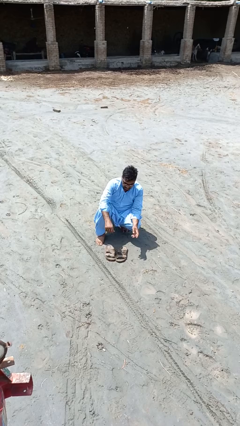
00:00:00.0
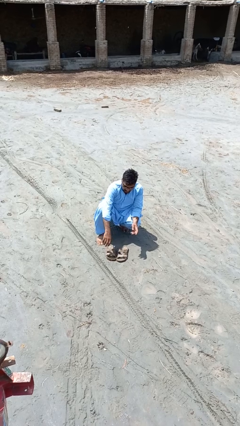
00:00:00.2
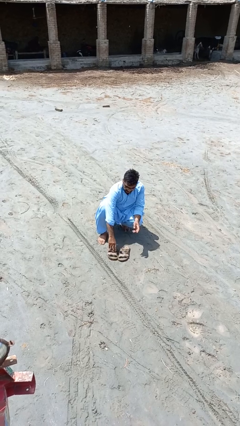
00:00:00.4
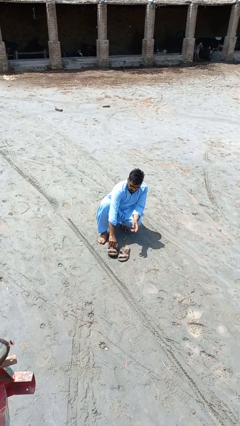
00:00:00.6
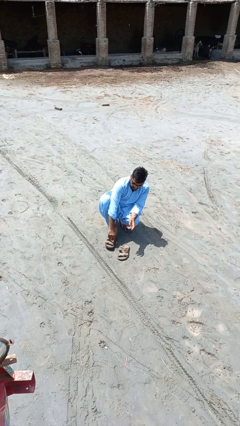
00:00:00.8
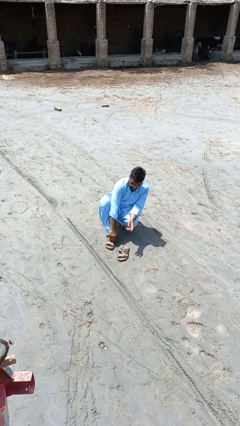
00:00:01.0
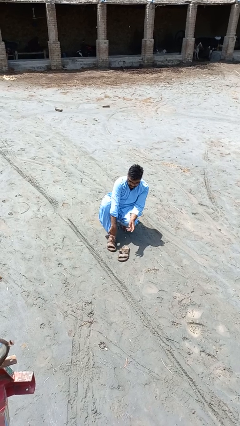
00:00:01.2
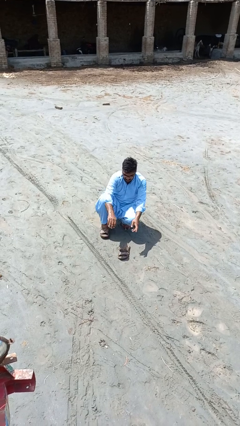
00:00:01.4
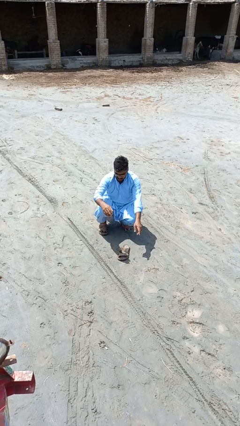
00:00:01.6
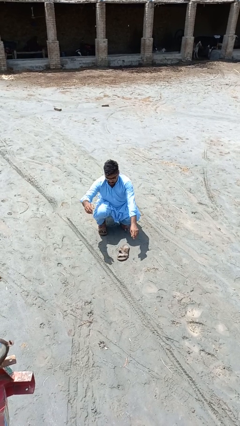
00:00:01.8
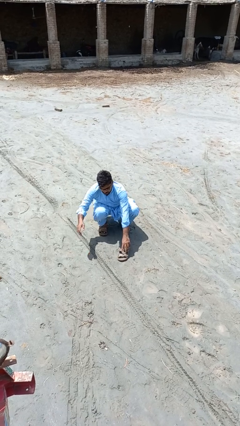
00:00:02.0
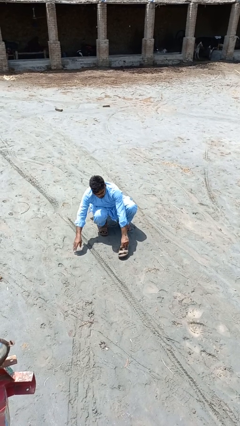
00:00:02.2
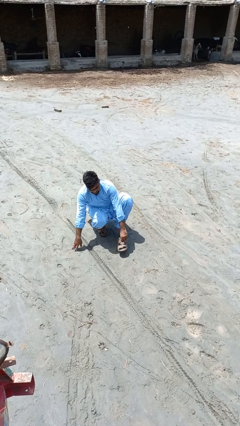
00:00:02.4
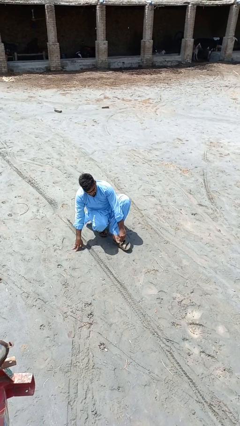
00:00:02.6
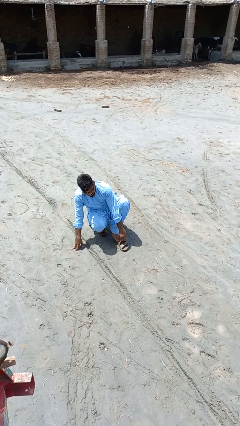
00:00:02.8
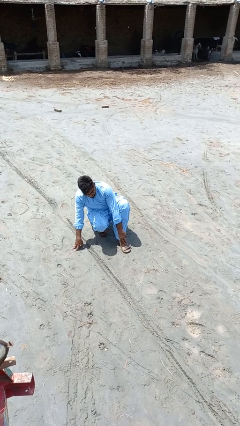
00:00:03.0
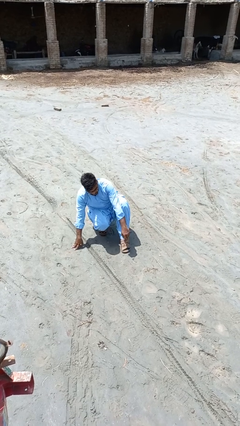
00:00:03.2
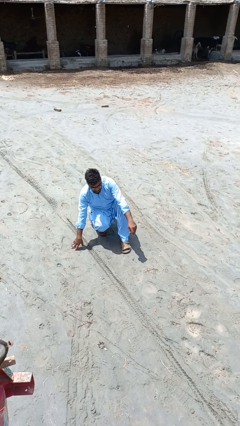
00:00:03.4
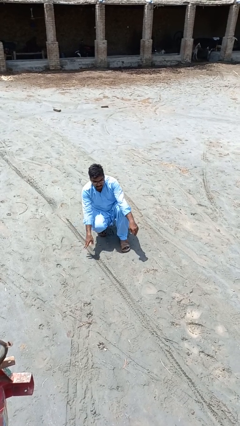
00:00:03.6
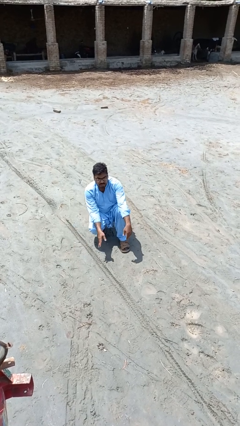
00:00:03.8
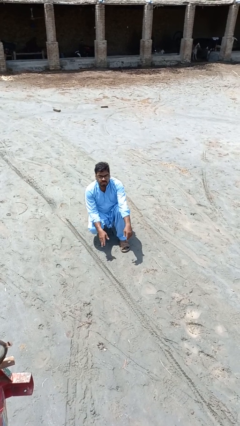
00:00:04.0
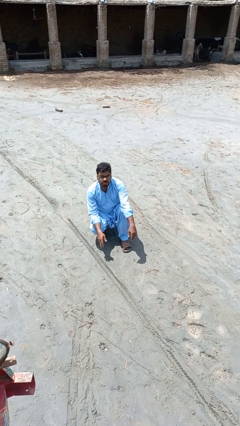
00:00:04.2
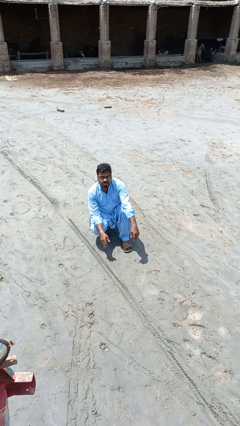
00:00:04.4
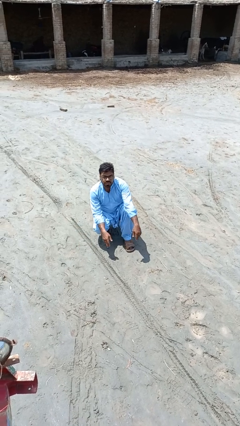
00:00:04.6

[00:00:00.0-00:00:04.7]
person puts on shoes

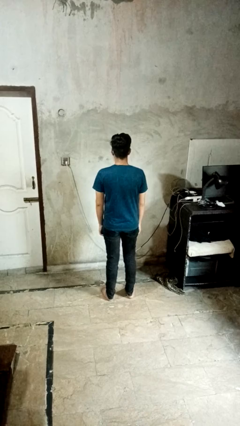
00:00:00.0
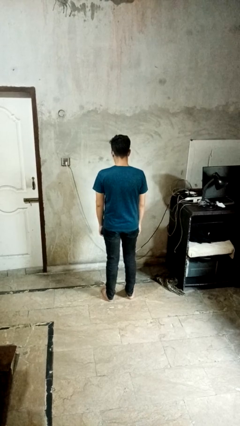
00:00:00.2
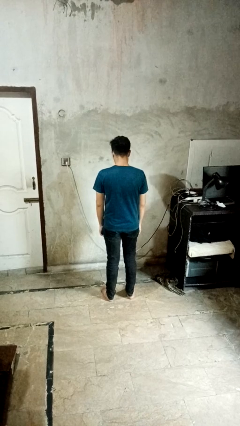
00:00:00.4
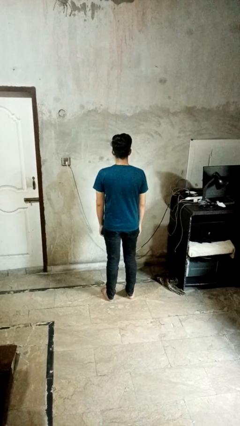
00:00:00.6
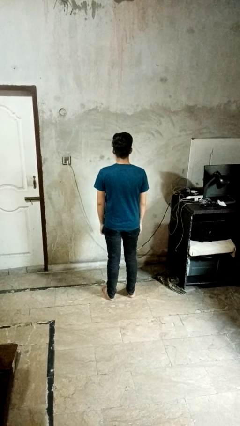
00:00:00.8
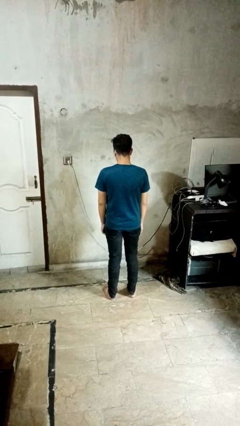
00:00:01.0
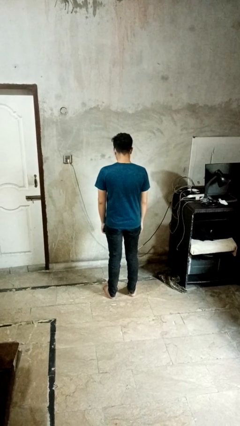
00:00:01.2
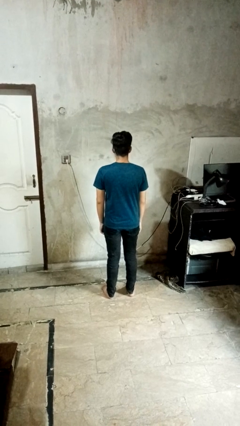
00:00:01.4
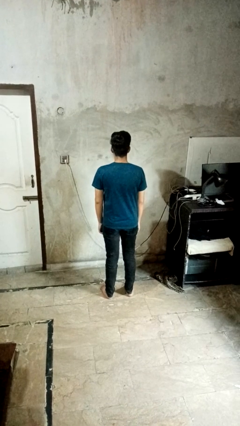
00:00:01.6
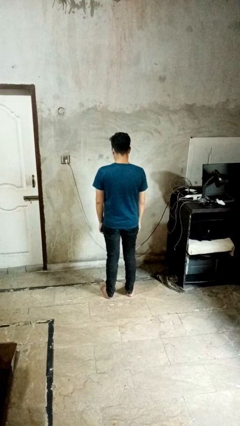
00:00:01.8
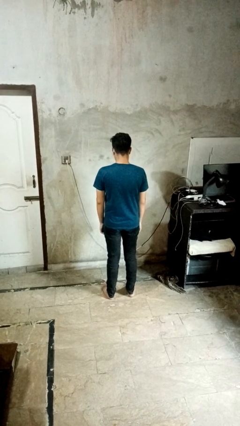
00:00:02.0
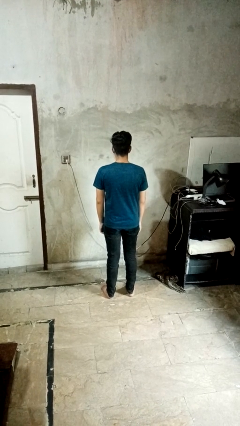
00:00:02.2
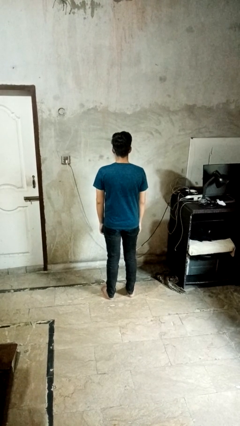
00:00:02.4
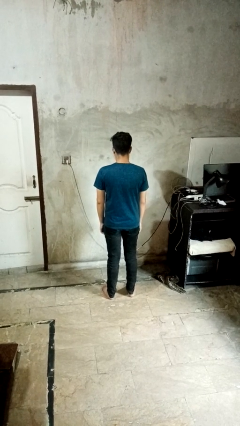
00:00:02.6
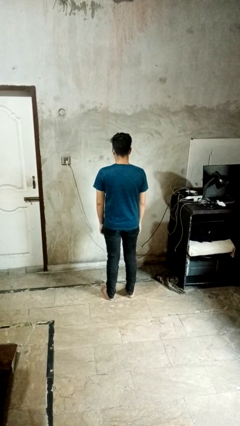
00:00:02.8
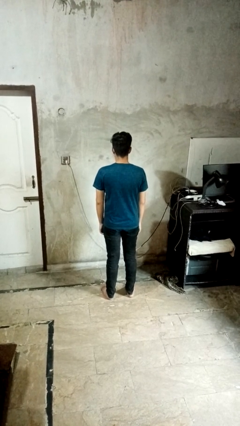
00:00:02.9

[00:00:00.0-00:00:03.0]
person nods head

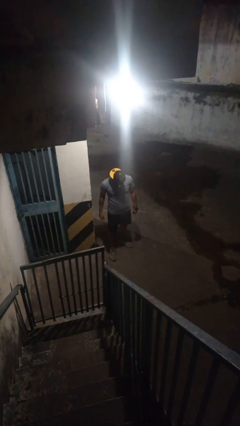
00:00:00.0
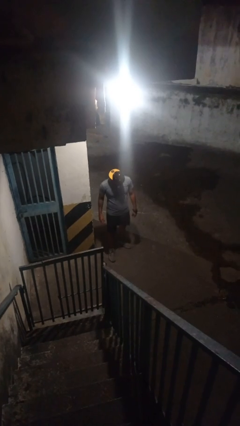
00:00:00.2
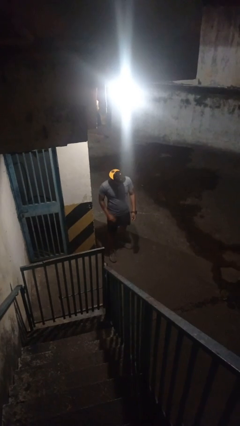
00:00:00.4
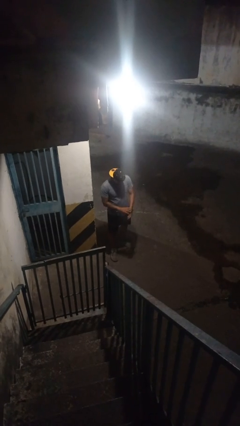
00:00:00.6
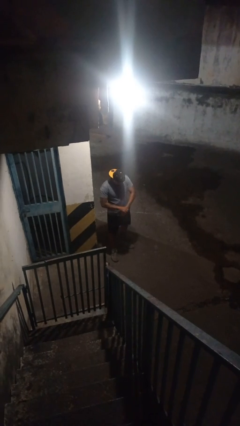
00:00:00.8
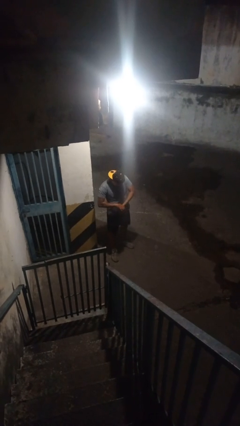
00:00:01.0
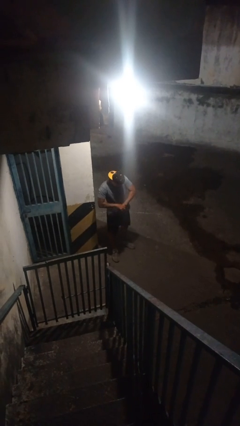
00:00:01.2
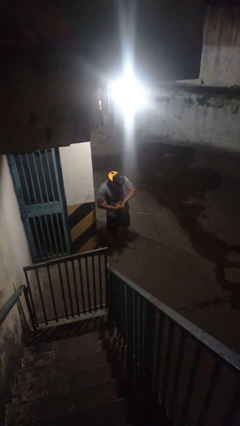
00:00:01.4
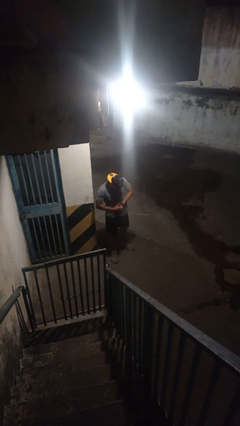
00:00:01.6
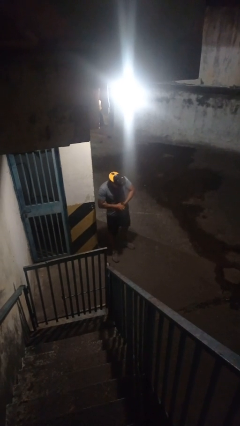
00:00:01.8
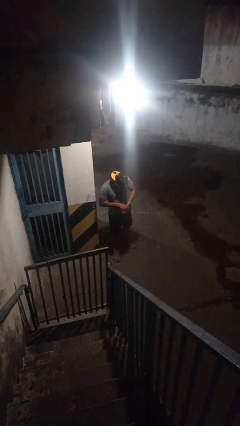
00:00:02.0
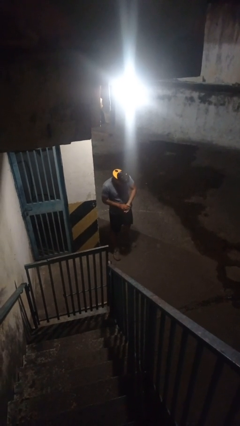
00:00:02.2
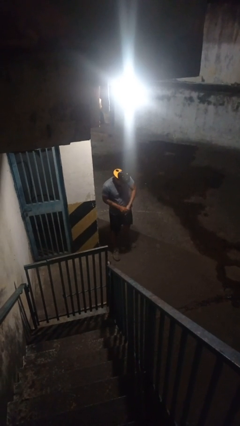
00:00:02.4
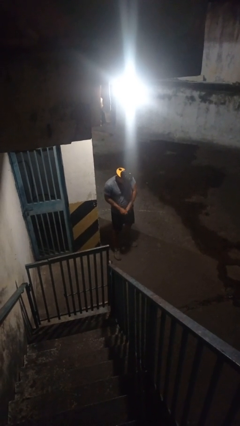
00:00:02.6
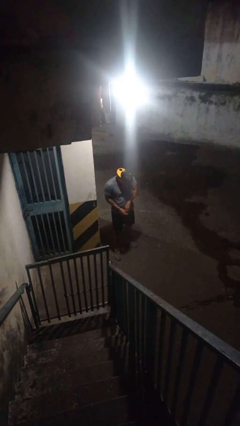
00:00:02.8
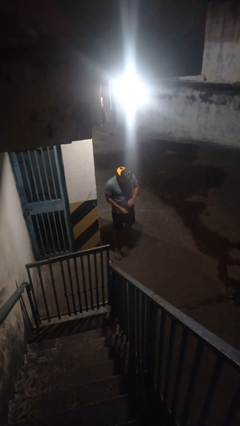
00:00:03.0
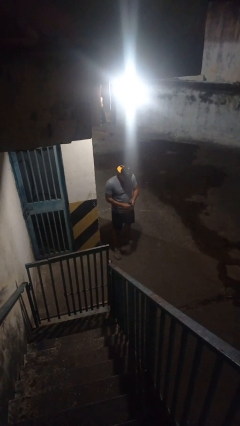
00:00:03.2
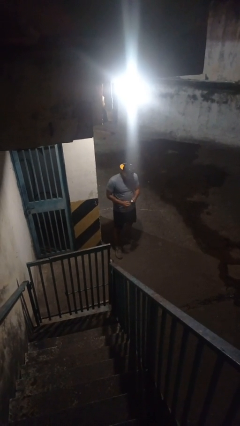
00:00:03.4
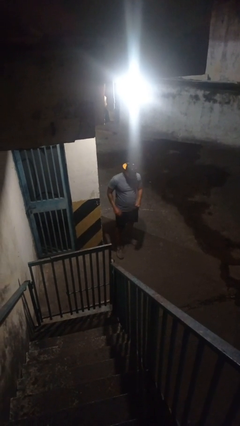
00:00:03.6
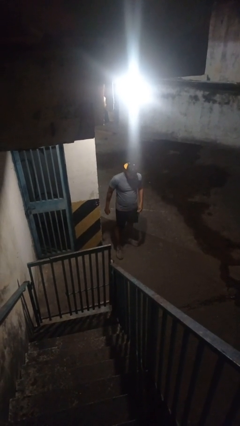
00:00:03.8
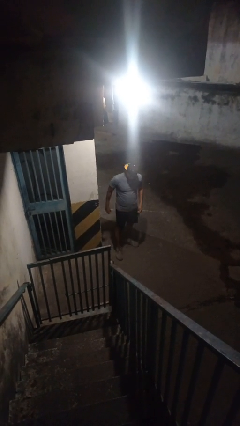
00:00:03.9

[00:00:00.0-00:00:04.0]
person takes off wristwatch

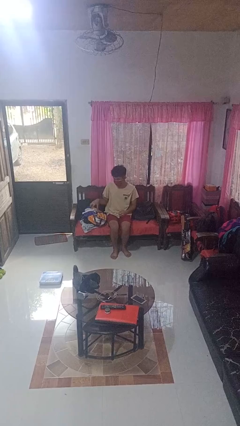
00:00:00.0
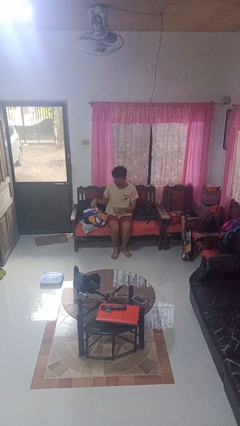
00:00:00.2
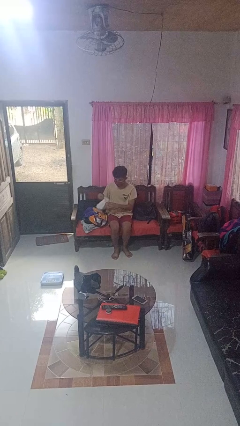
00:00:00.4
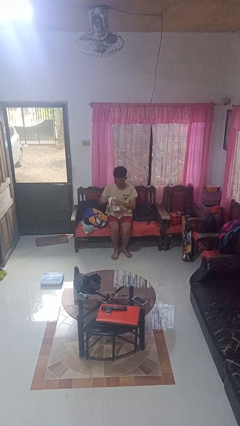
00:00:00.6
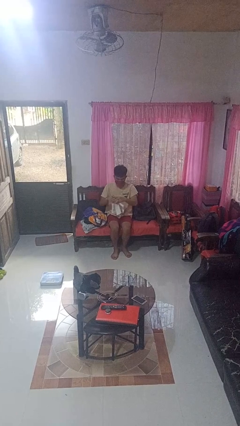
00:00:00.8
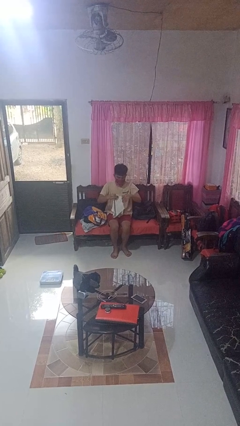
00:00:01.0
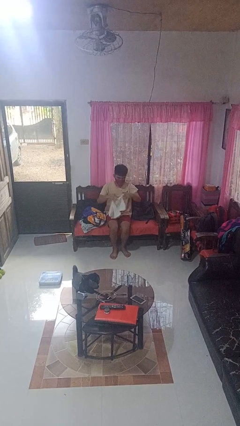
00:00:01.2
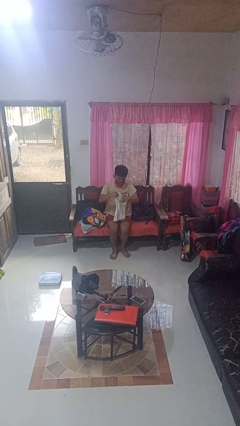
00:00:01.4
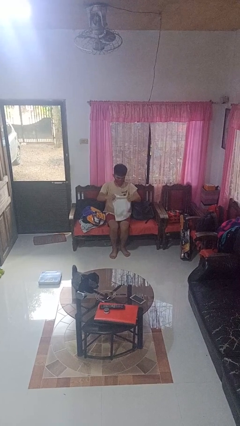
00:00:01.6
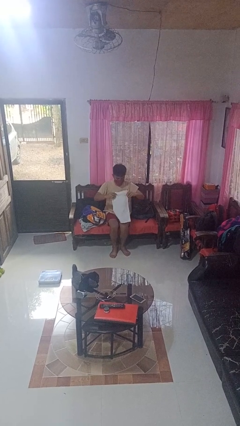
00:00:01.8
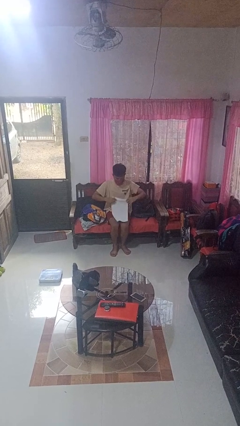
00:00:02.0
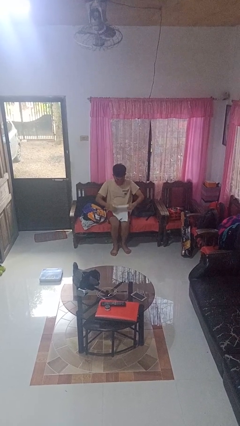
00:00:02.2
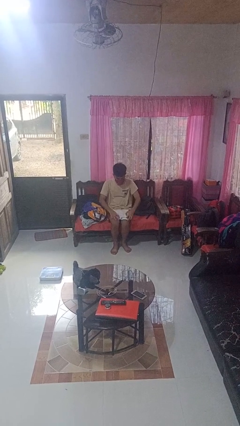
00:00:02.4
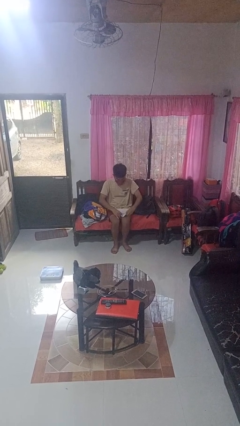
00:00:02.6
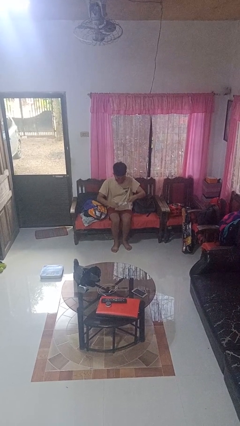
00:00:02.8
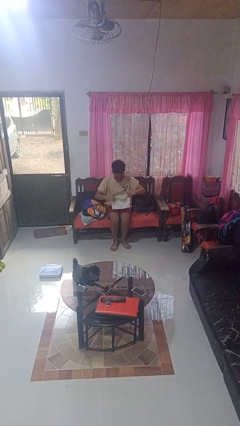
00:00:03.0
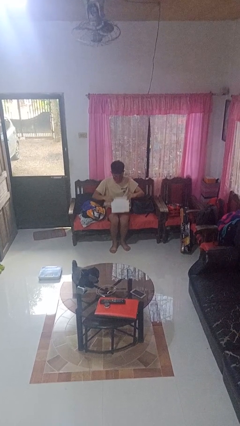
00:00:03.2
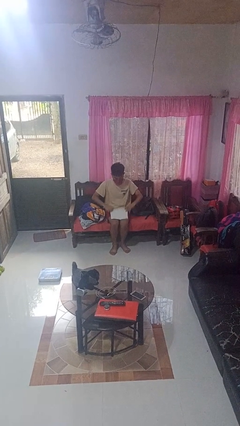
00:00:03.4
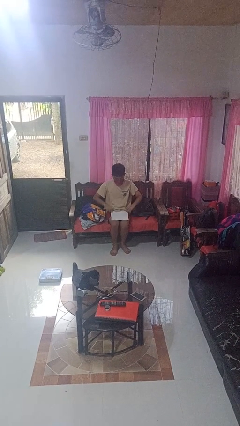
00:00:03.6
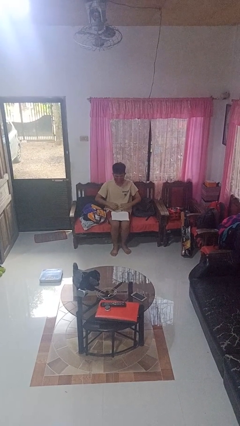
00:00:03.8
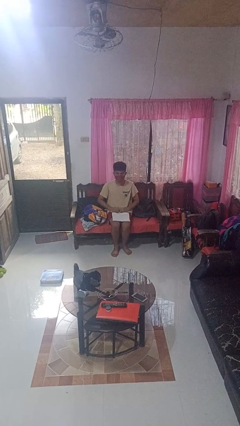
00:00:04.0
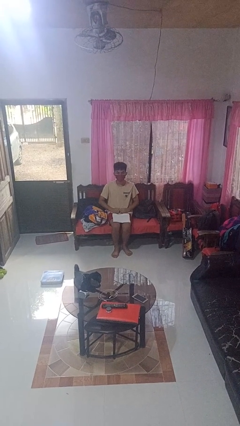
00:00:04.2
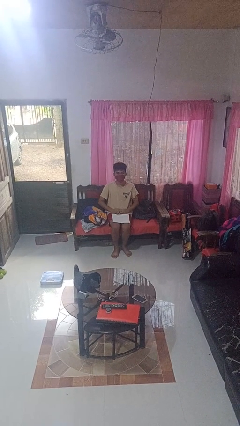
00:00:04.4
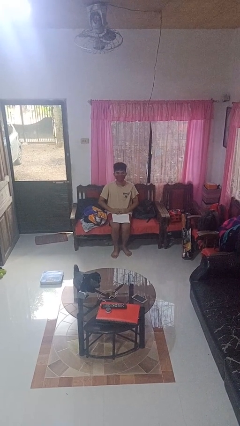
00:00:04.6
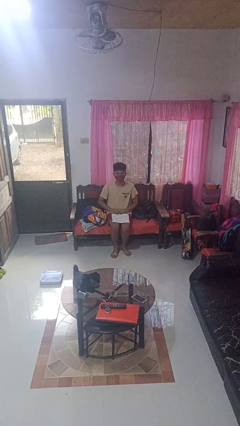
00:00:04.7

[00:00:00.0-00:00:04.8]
person folds towel

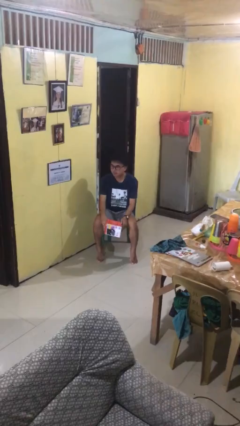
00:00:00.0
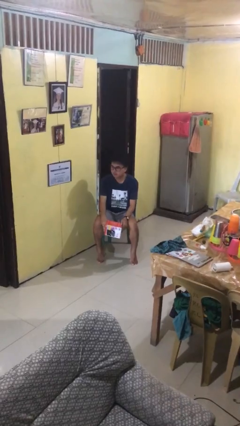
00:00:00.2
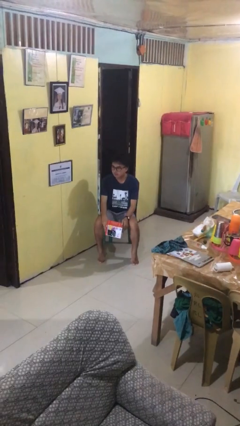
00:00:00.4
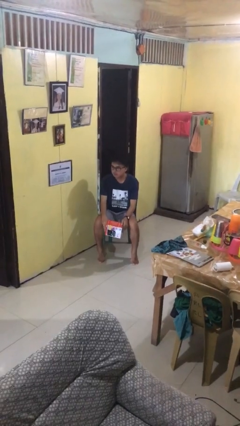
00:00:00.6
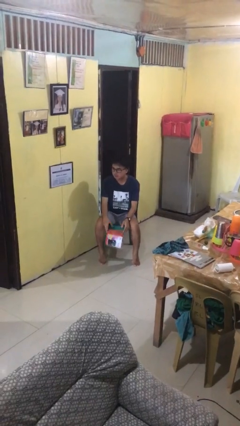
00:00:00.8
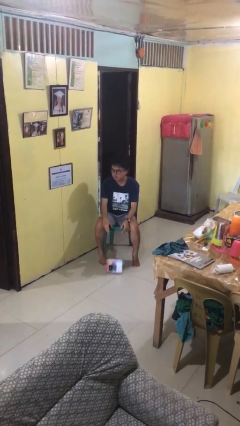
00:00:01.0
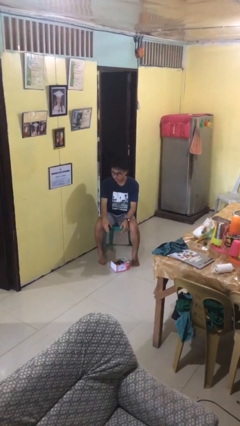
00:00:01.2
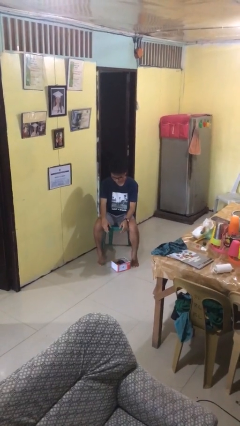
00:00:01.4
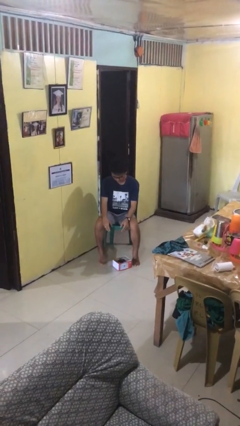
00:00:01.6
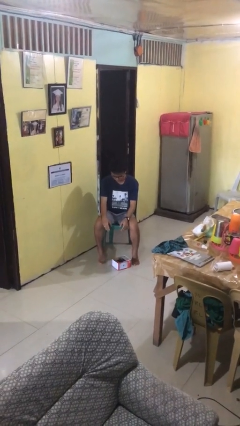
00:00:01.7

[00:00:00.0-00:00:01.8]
person drops object
